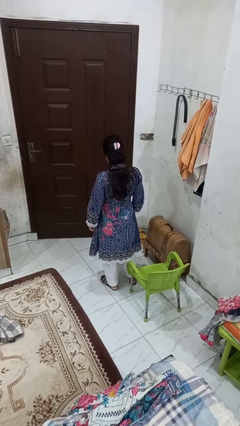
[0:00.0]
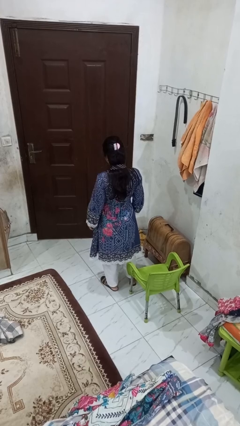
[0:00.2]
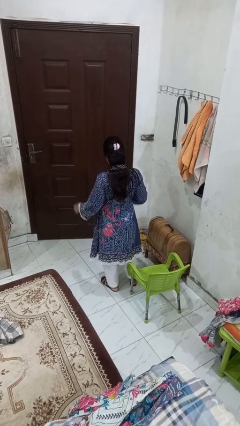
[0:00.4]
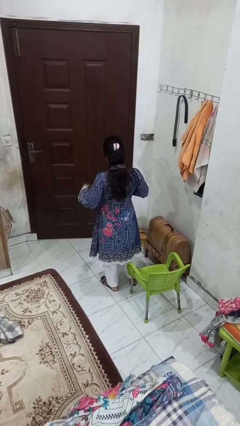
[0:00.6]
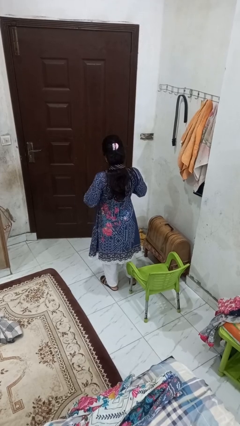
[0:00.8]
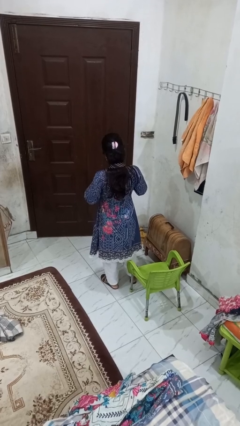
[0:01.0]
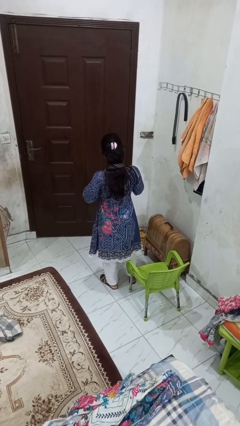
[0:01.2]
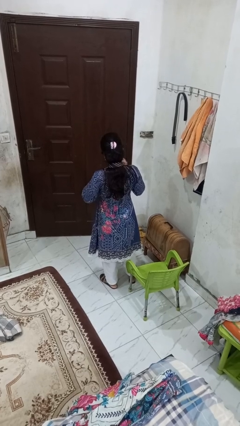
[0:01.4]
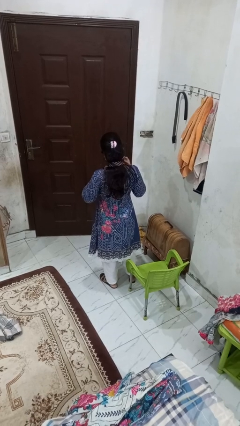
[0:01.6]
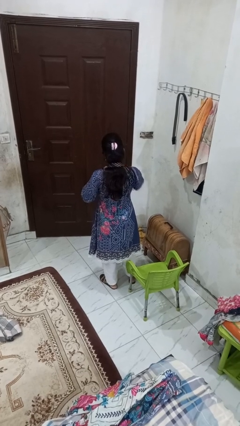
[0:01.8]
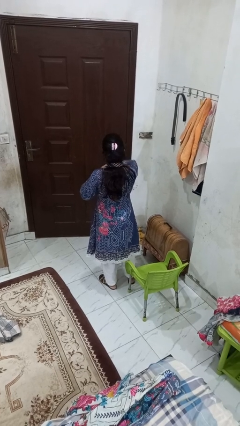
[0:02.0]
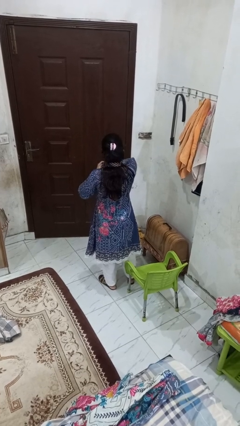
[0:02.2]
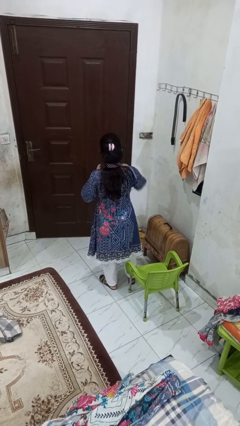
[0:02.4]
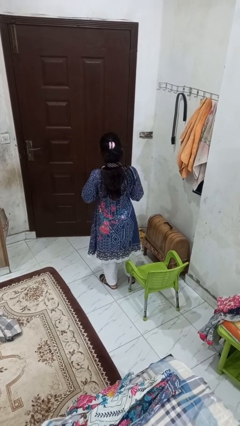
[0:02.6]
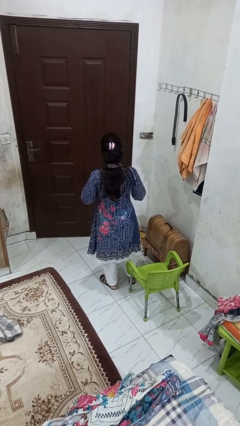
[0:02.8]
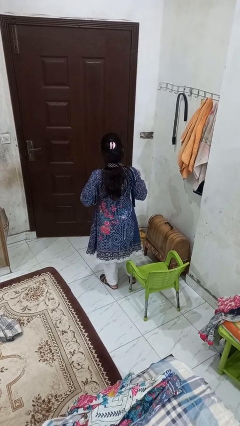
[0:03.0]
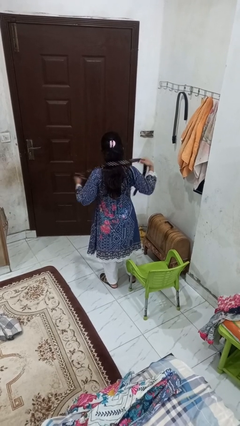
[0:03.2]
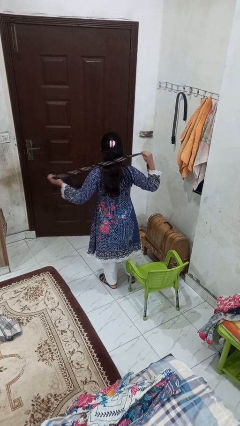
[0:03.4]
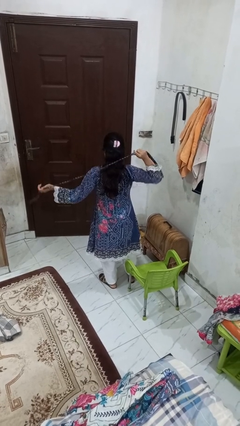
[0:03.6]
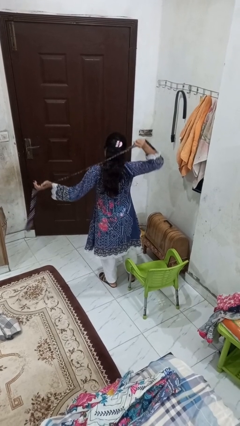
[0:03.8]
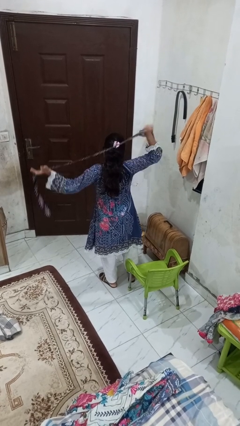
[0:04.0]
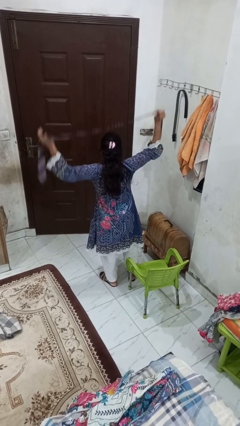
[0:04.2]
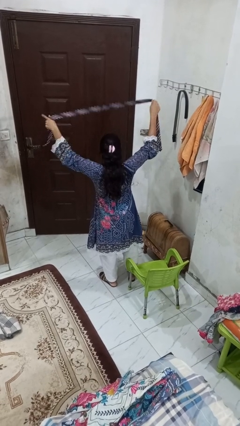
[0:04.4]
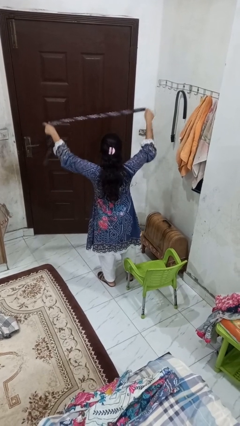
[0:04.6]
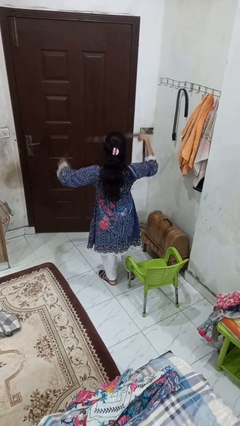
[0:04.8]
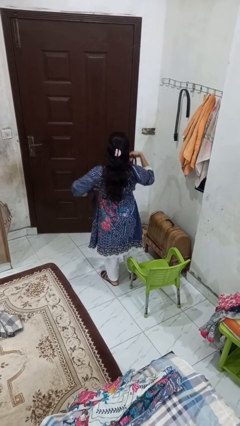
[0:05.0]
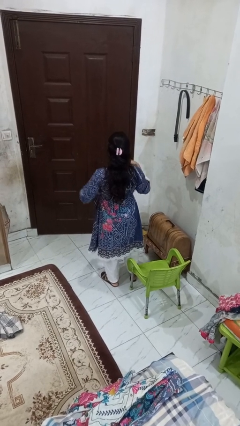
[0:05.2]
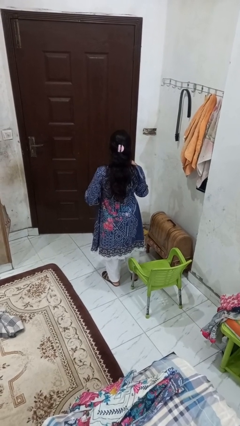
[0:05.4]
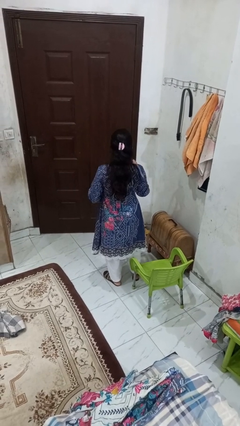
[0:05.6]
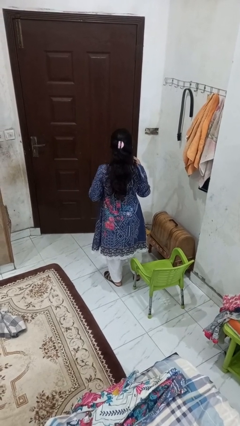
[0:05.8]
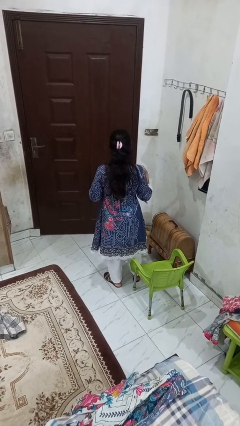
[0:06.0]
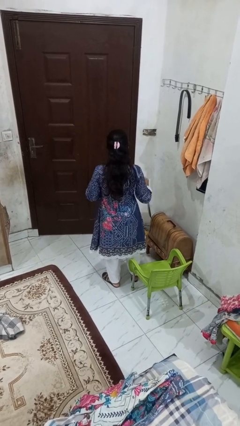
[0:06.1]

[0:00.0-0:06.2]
person takes off necktie

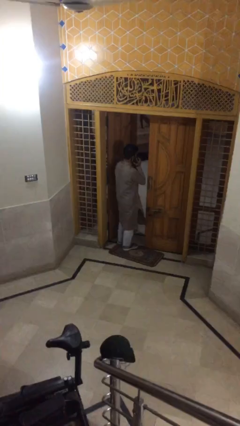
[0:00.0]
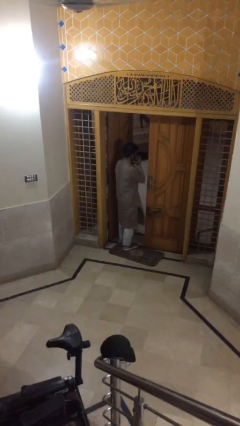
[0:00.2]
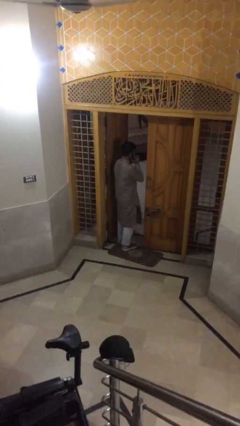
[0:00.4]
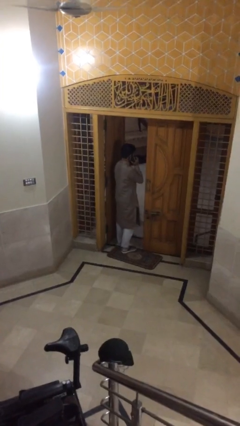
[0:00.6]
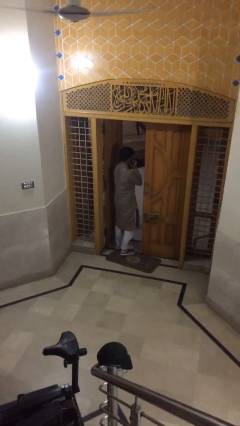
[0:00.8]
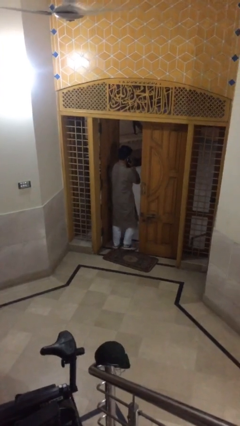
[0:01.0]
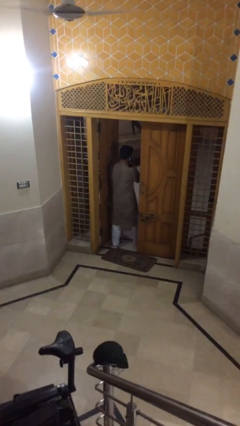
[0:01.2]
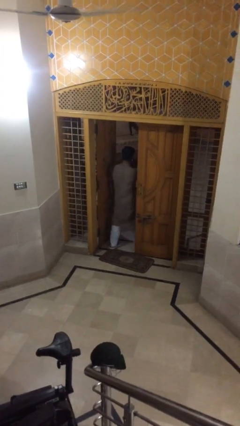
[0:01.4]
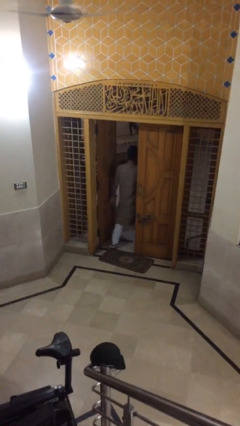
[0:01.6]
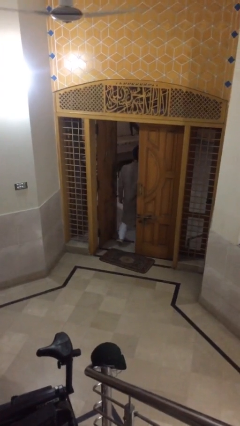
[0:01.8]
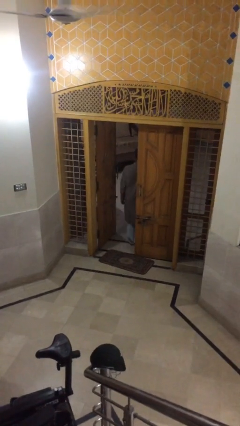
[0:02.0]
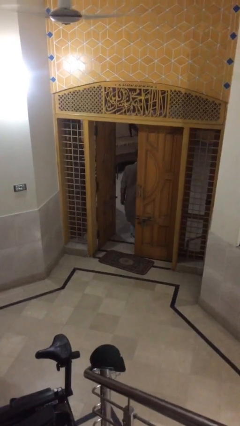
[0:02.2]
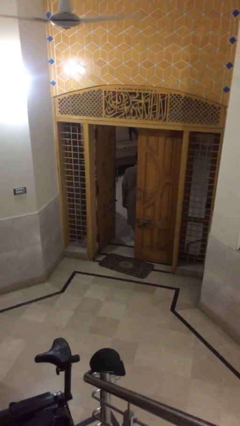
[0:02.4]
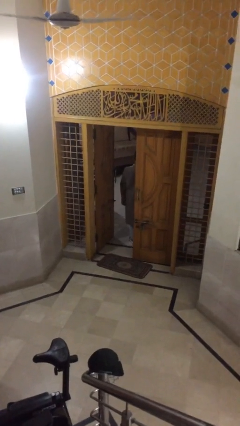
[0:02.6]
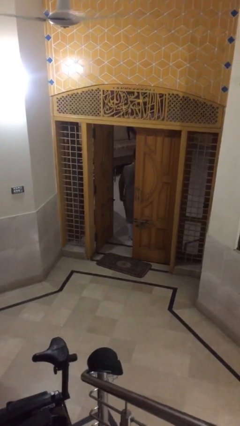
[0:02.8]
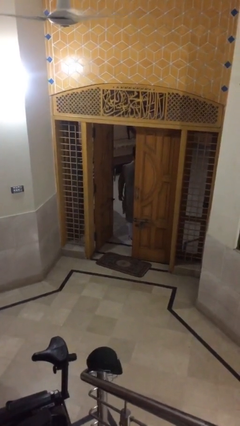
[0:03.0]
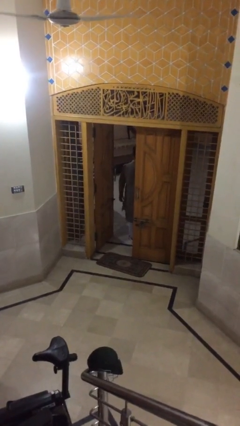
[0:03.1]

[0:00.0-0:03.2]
person exits scene through structure

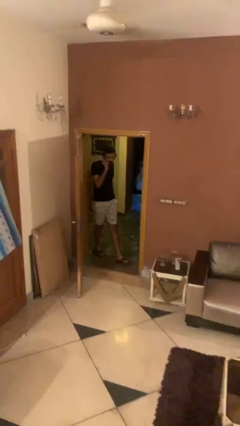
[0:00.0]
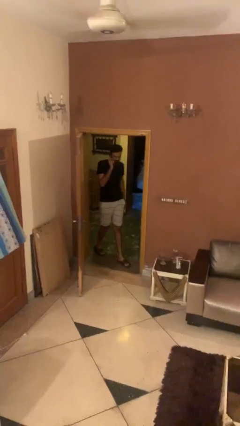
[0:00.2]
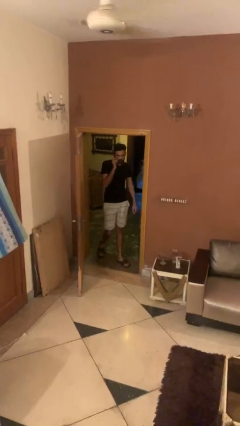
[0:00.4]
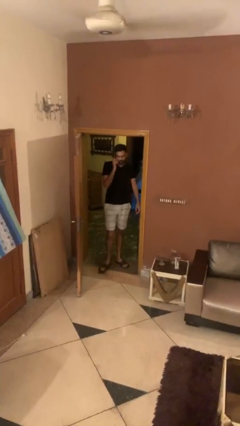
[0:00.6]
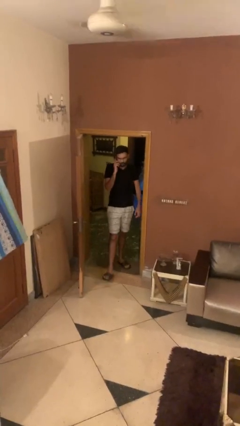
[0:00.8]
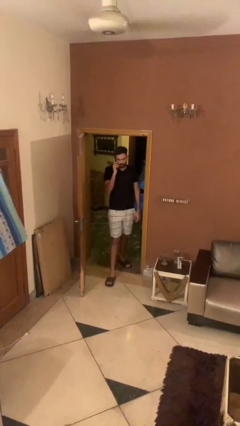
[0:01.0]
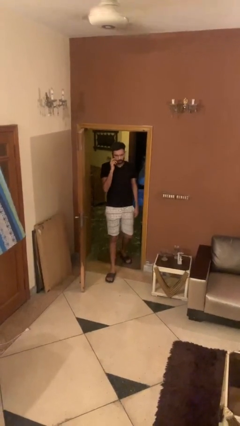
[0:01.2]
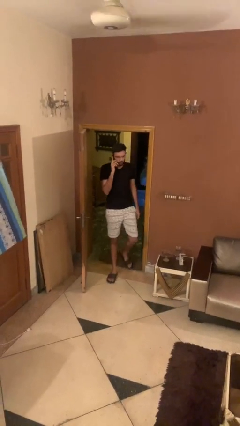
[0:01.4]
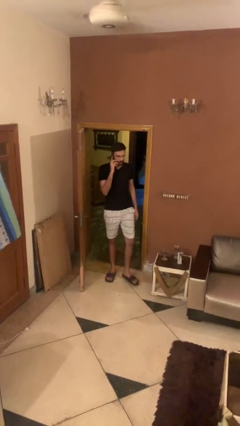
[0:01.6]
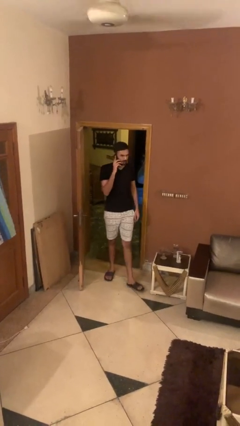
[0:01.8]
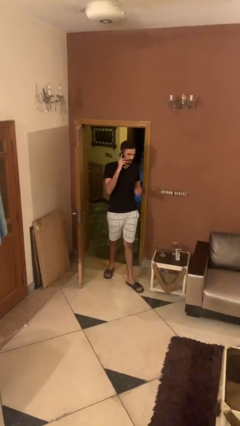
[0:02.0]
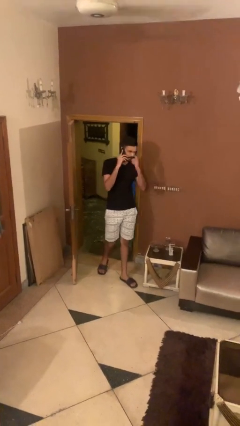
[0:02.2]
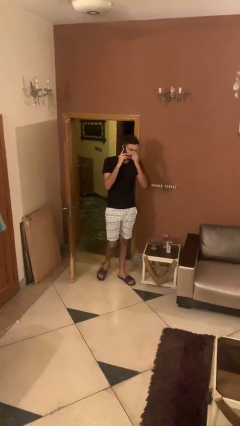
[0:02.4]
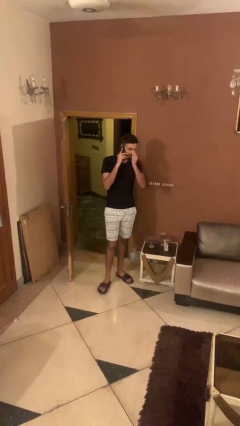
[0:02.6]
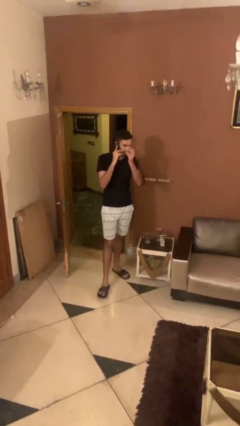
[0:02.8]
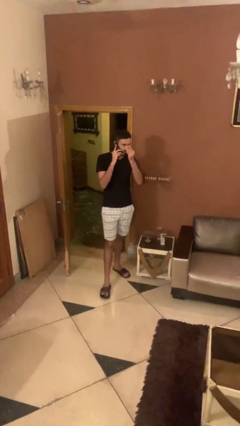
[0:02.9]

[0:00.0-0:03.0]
person enters scene through structure

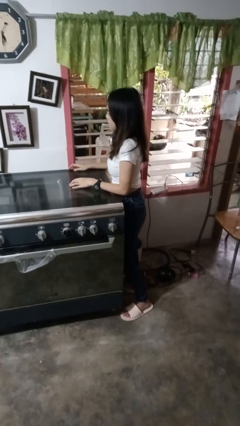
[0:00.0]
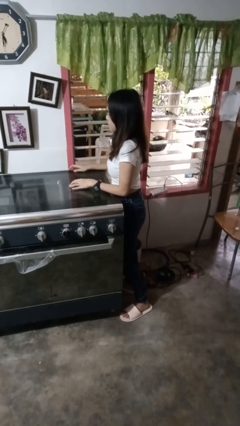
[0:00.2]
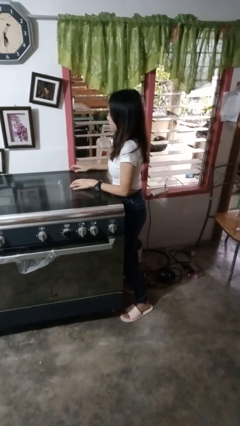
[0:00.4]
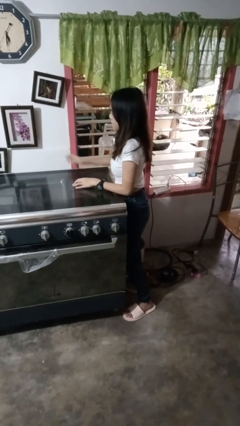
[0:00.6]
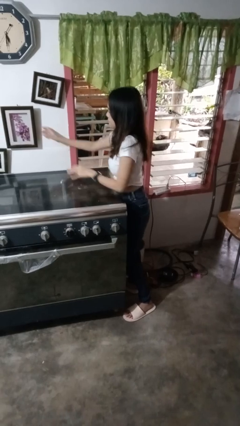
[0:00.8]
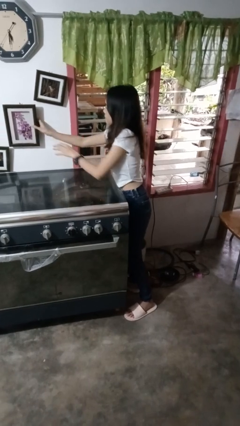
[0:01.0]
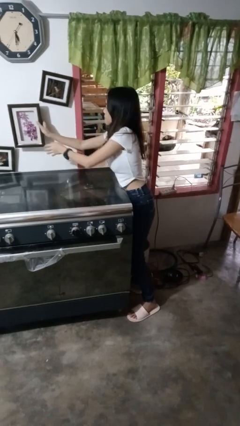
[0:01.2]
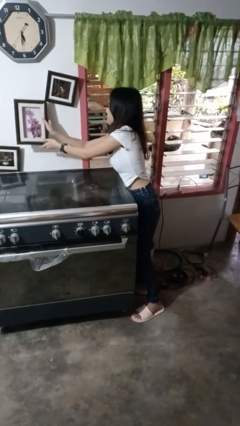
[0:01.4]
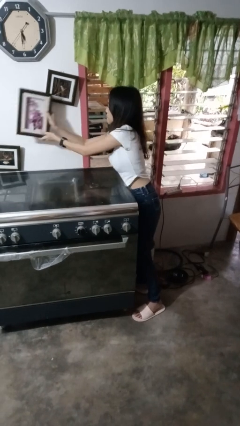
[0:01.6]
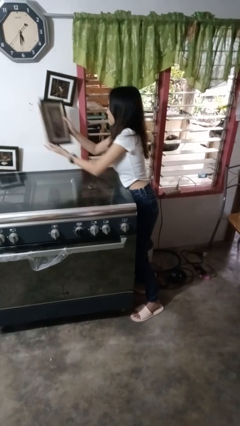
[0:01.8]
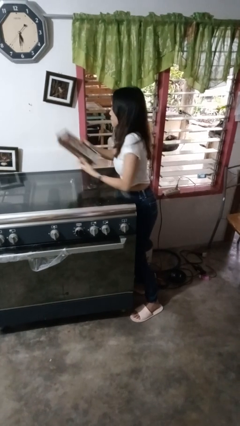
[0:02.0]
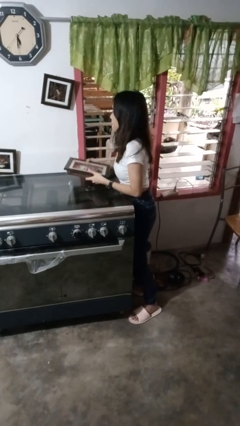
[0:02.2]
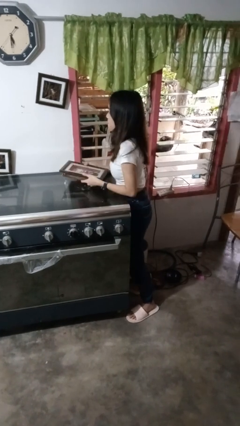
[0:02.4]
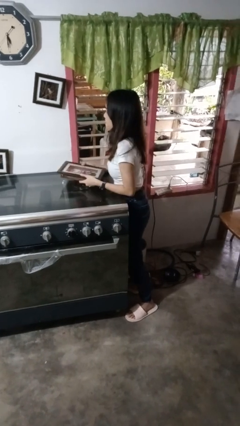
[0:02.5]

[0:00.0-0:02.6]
person takes down picture frame

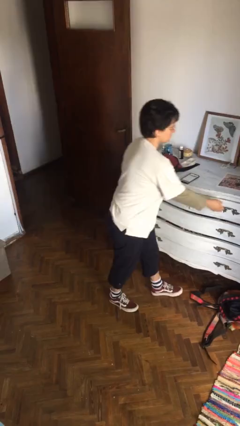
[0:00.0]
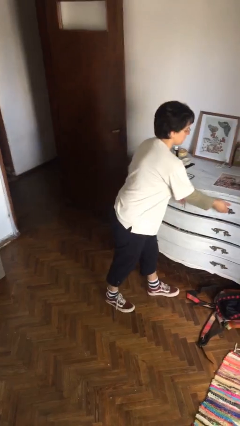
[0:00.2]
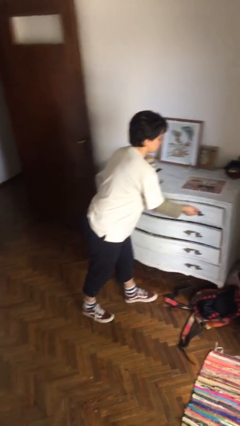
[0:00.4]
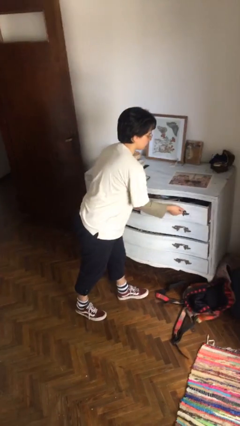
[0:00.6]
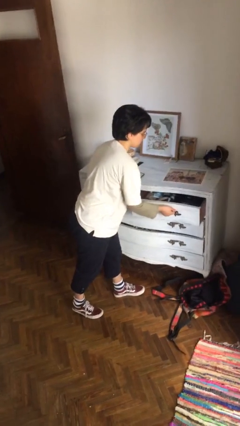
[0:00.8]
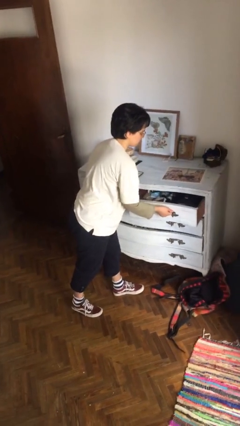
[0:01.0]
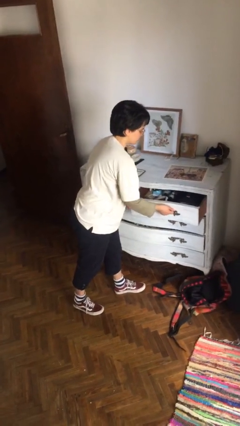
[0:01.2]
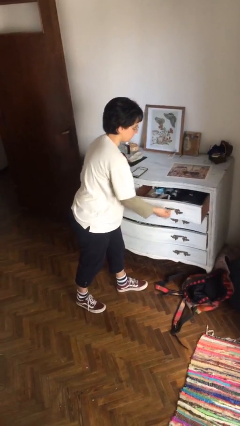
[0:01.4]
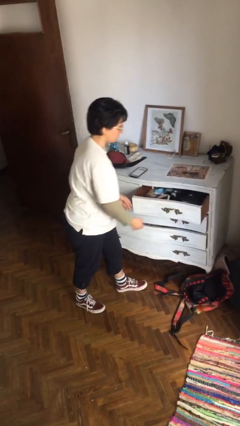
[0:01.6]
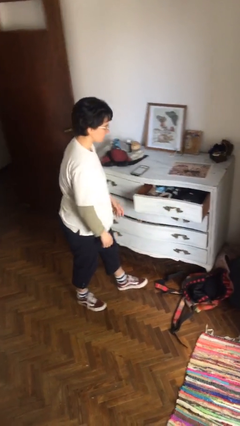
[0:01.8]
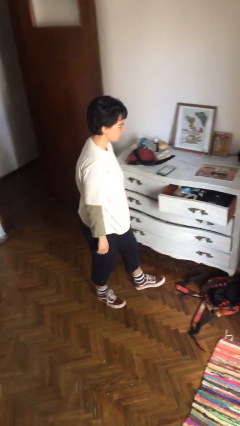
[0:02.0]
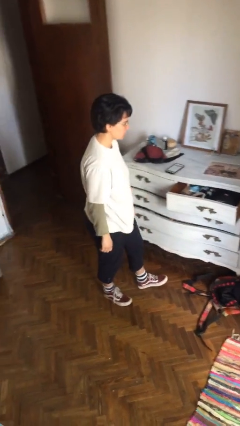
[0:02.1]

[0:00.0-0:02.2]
person opens dresser drawer

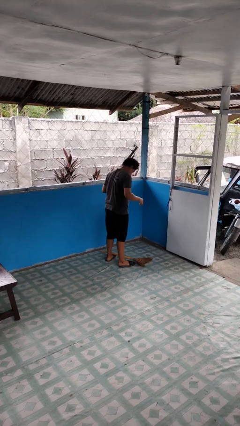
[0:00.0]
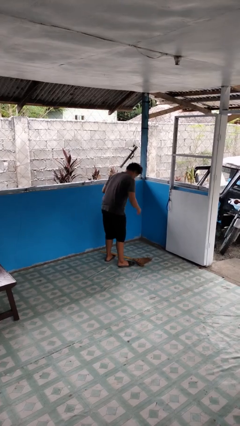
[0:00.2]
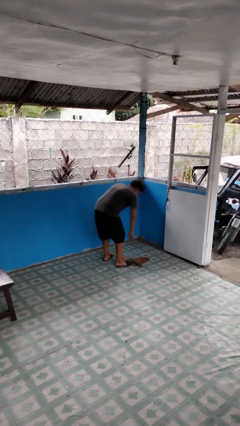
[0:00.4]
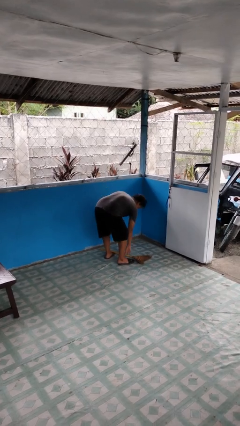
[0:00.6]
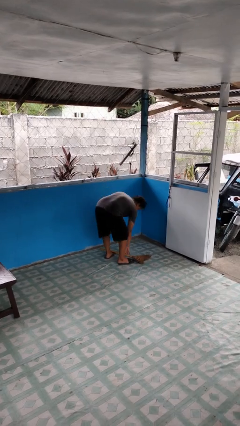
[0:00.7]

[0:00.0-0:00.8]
person picks up object from floor
